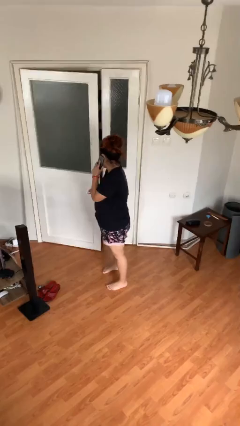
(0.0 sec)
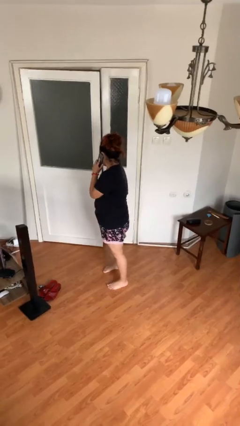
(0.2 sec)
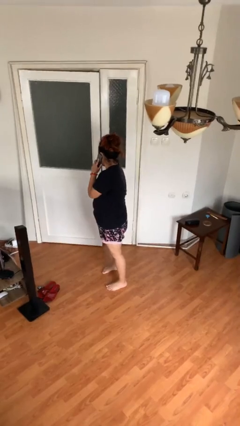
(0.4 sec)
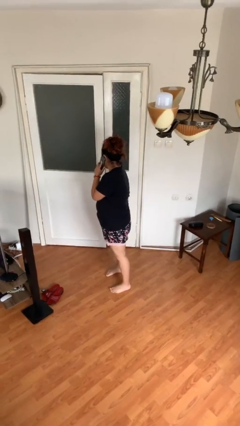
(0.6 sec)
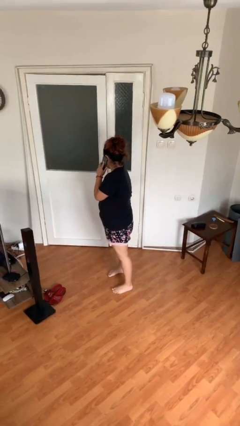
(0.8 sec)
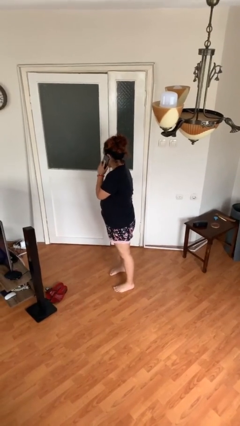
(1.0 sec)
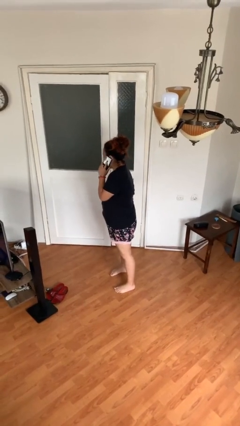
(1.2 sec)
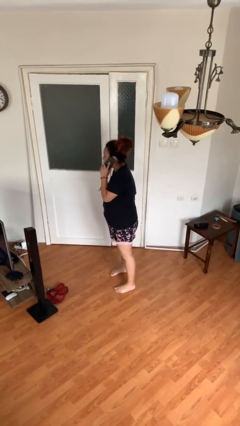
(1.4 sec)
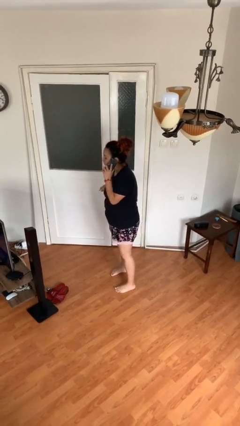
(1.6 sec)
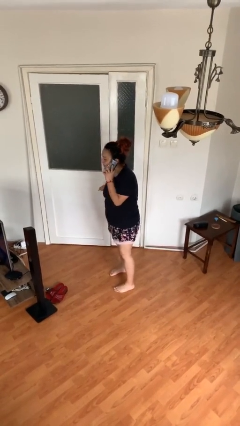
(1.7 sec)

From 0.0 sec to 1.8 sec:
person closes facility door

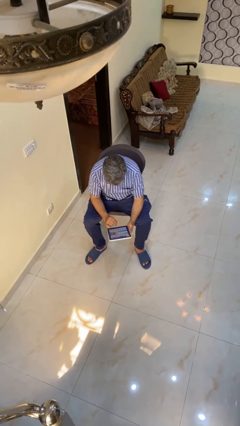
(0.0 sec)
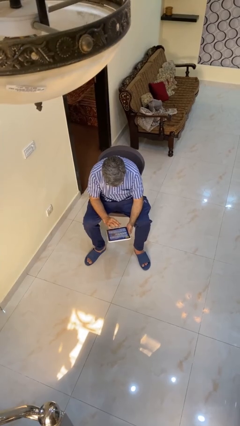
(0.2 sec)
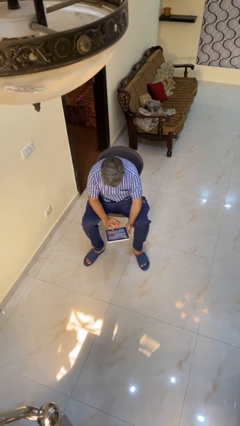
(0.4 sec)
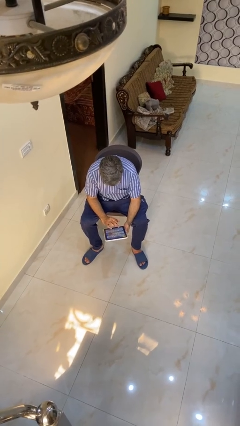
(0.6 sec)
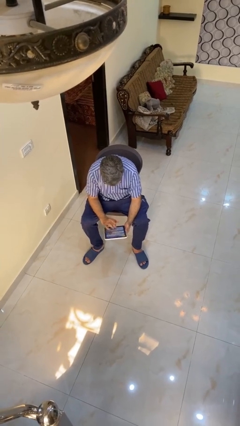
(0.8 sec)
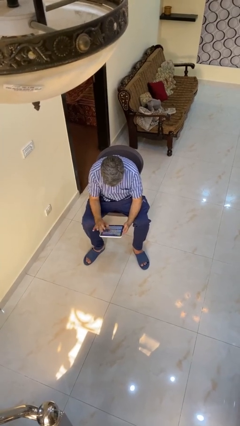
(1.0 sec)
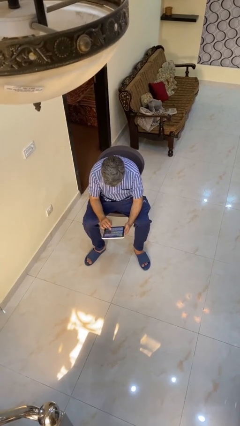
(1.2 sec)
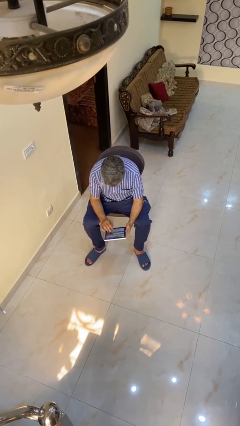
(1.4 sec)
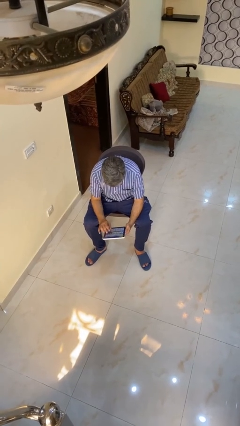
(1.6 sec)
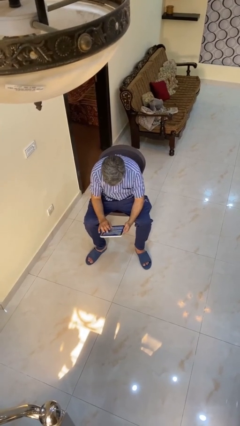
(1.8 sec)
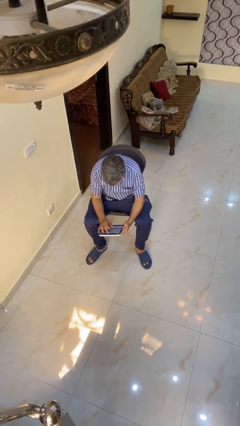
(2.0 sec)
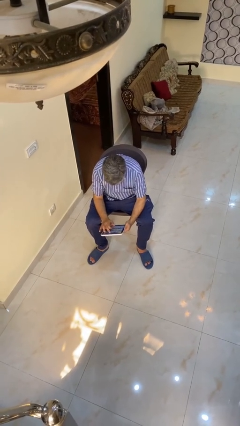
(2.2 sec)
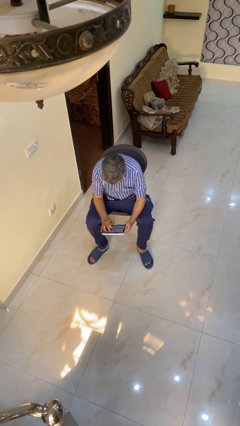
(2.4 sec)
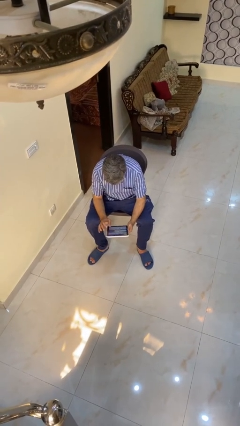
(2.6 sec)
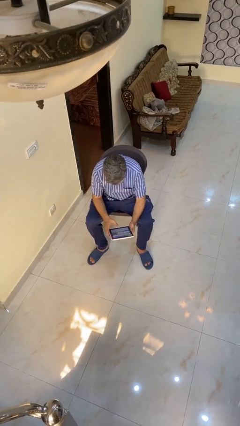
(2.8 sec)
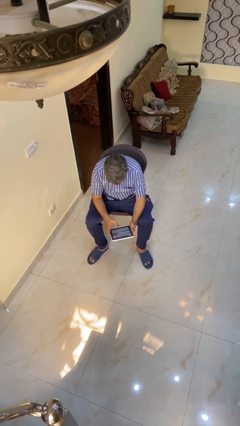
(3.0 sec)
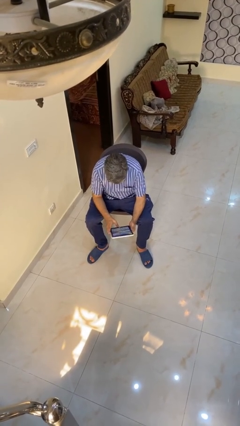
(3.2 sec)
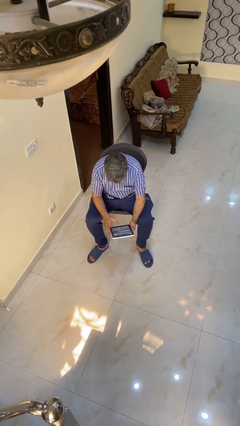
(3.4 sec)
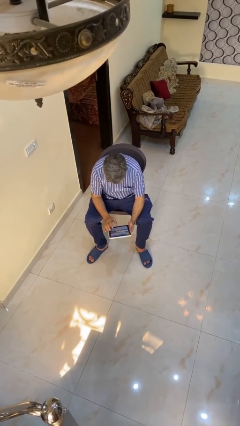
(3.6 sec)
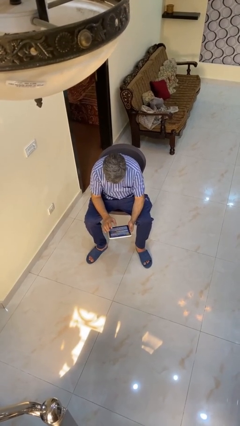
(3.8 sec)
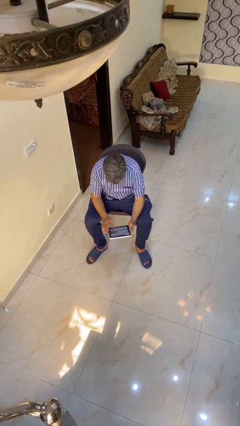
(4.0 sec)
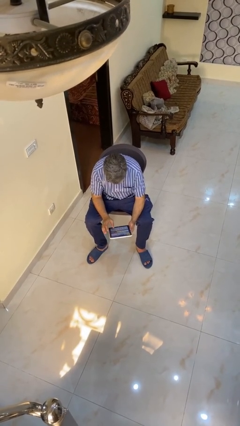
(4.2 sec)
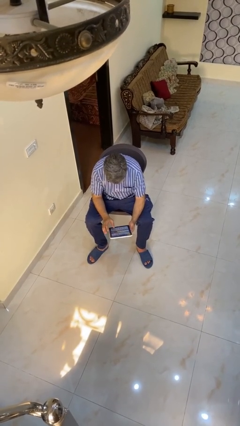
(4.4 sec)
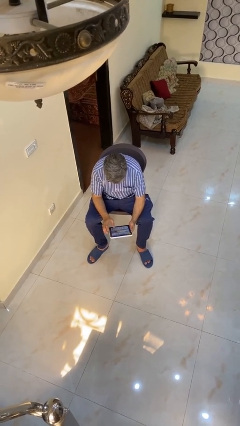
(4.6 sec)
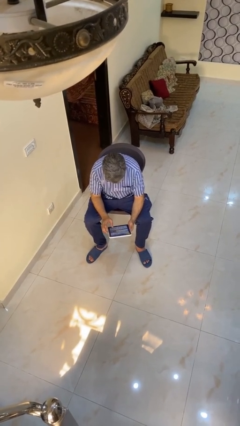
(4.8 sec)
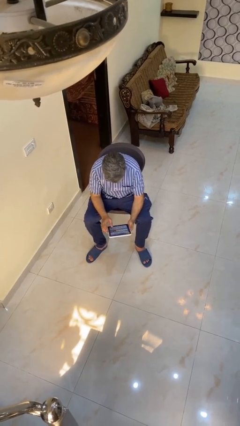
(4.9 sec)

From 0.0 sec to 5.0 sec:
person interacts with tablet

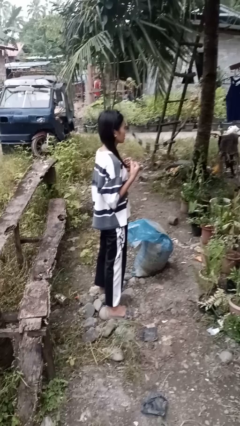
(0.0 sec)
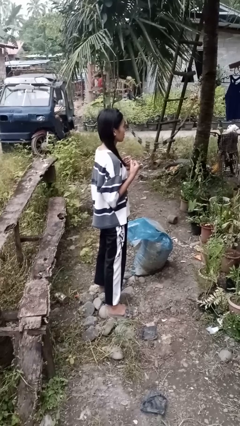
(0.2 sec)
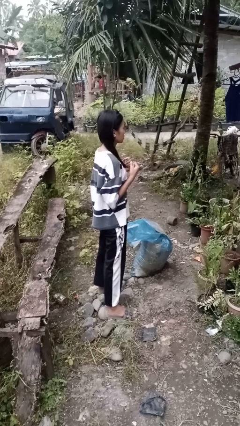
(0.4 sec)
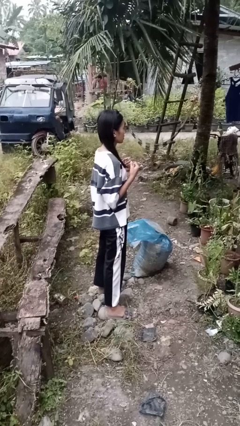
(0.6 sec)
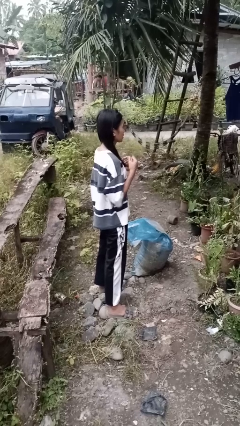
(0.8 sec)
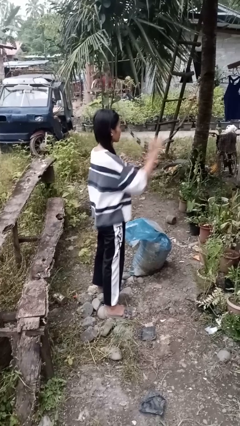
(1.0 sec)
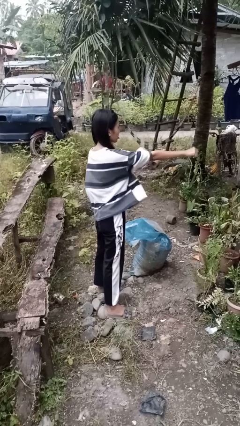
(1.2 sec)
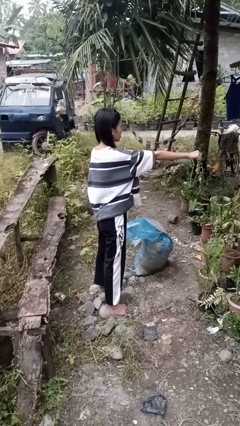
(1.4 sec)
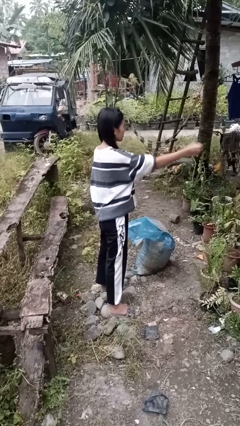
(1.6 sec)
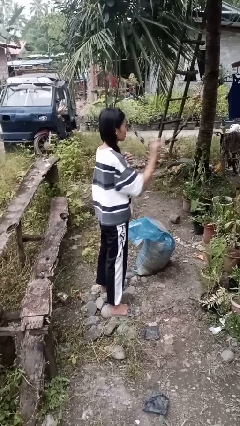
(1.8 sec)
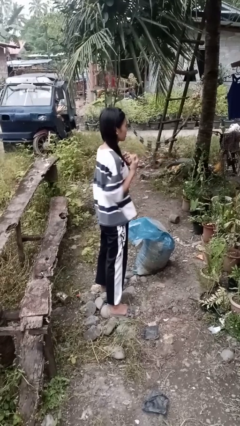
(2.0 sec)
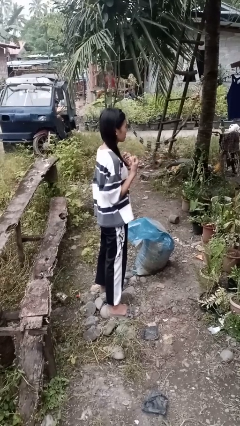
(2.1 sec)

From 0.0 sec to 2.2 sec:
person punches

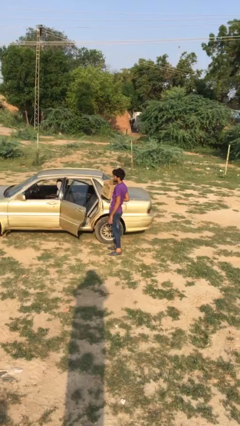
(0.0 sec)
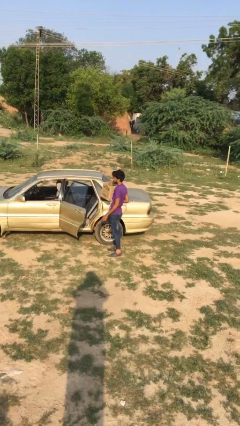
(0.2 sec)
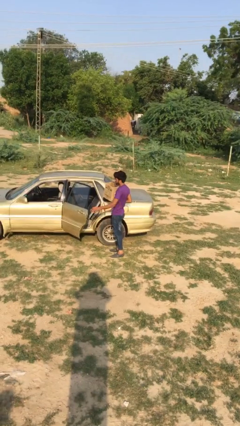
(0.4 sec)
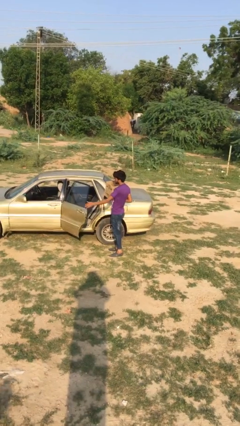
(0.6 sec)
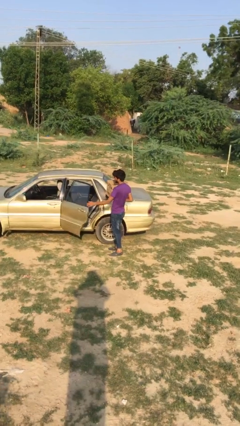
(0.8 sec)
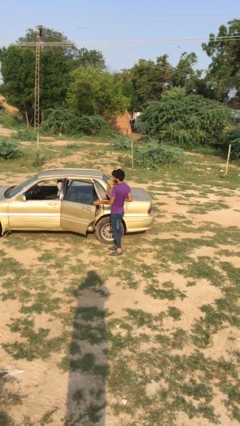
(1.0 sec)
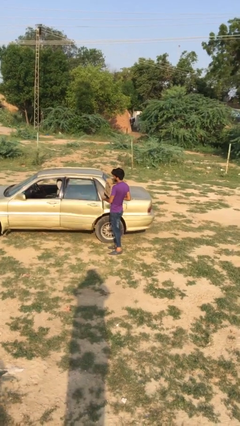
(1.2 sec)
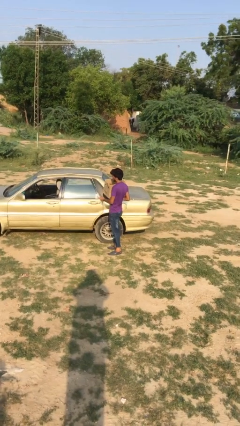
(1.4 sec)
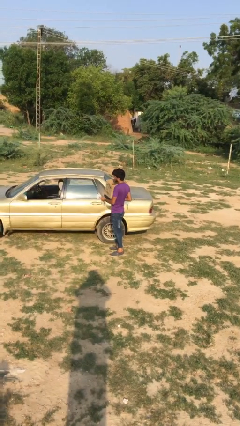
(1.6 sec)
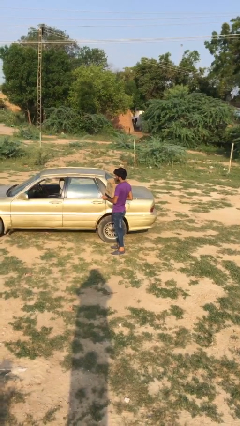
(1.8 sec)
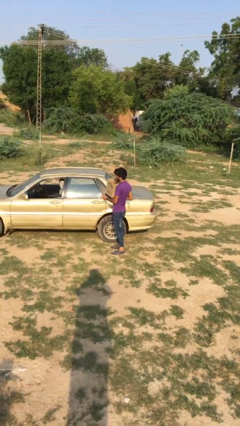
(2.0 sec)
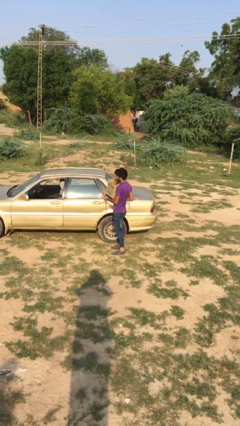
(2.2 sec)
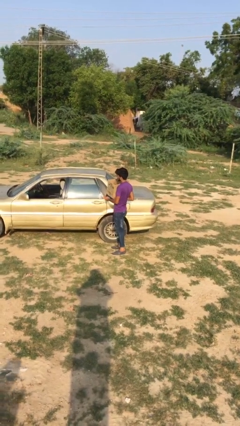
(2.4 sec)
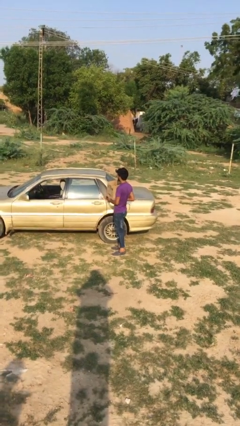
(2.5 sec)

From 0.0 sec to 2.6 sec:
person closes car door

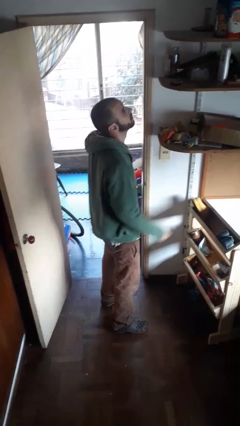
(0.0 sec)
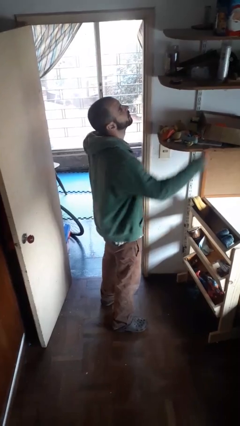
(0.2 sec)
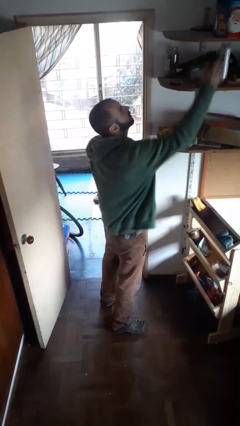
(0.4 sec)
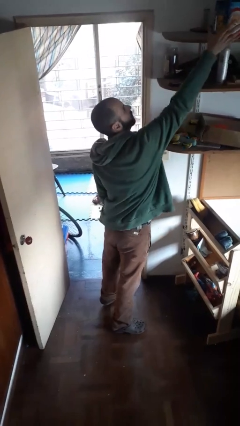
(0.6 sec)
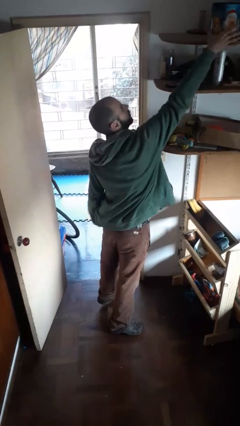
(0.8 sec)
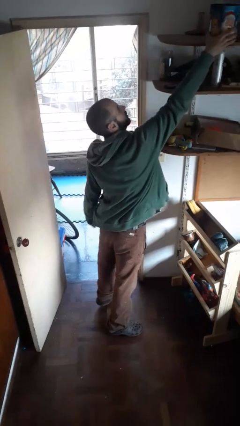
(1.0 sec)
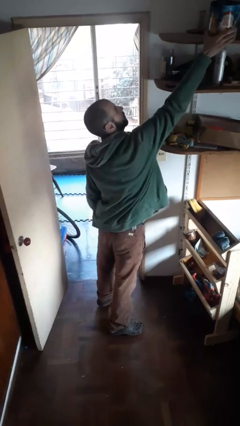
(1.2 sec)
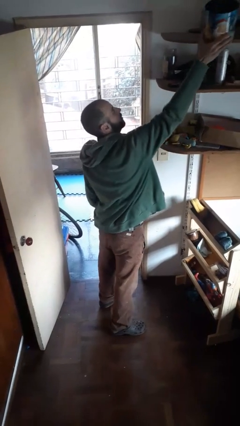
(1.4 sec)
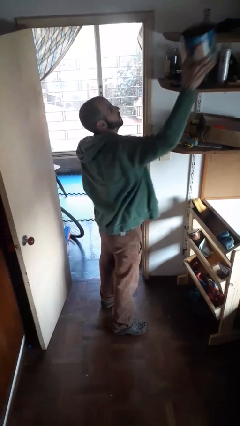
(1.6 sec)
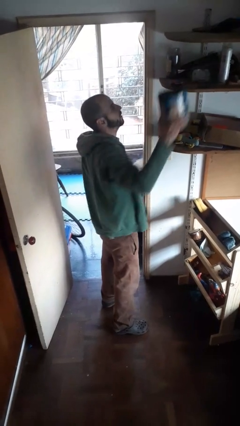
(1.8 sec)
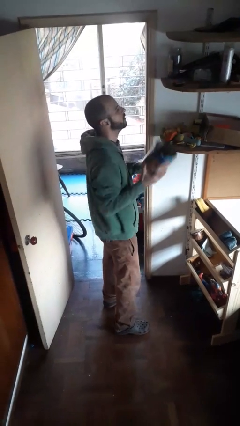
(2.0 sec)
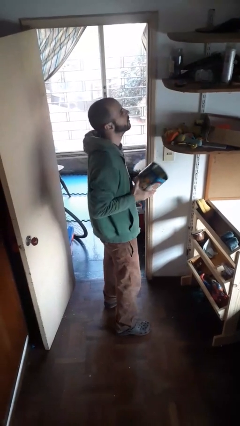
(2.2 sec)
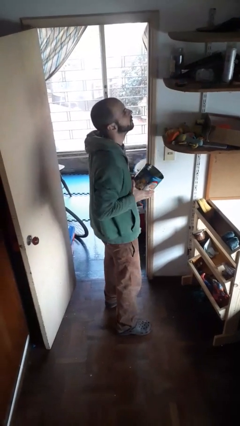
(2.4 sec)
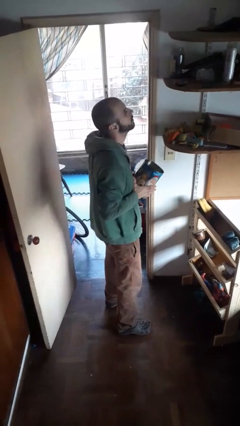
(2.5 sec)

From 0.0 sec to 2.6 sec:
person picks up object from shelf

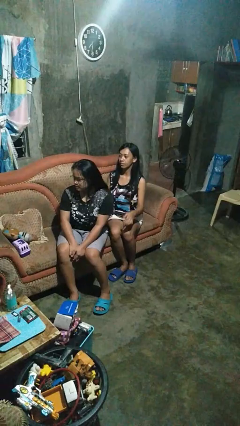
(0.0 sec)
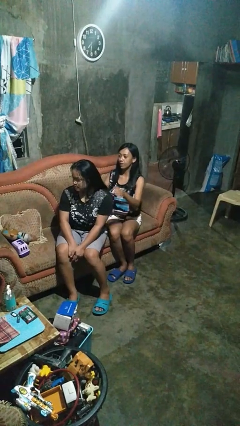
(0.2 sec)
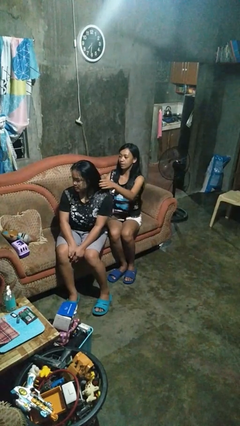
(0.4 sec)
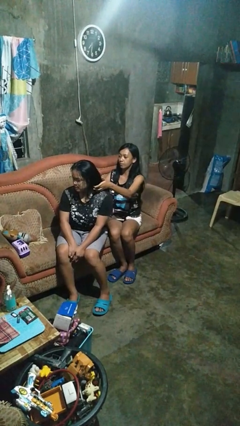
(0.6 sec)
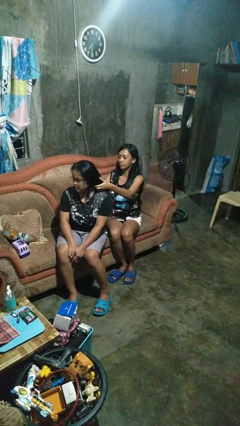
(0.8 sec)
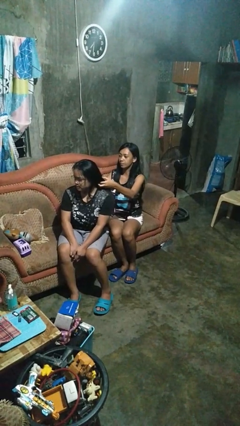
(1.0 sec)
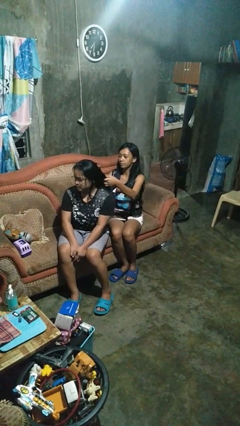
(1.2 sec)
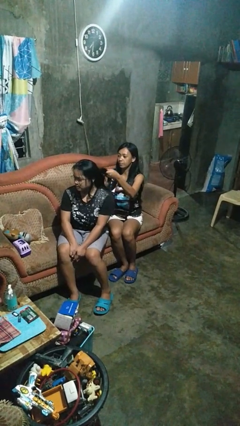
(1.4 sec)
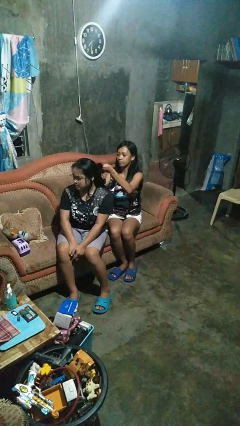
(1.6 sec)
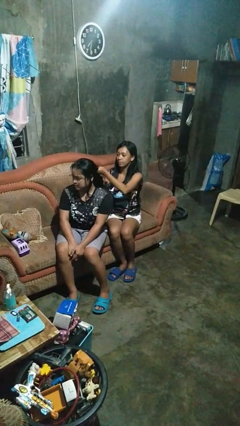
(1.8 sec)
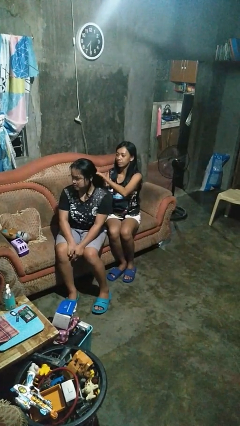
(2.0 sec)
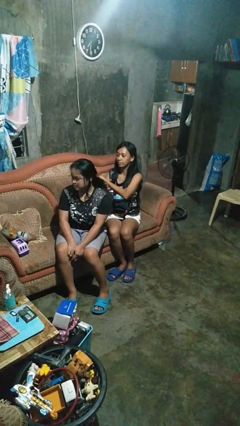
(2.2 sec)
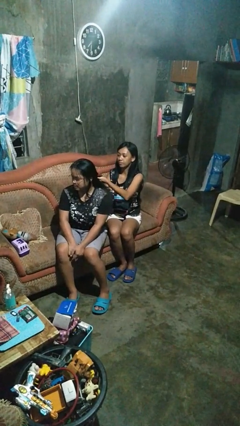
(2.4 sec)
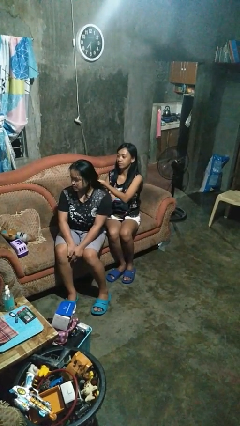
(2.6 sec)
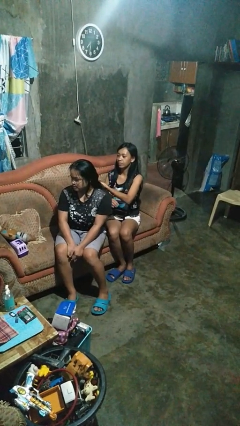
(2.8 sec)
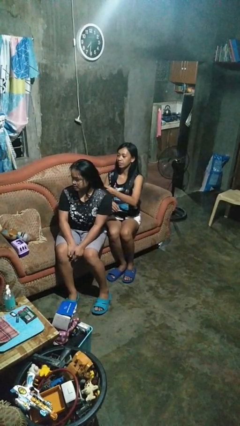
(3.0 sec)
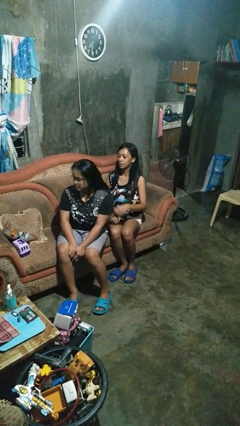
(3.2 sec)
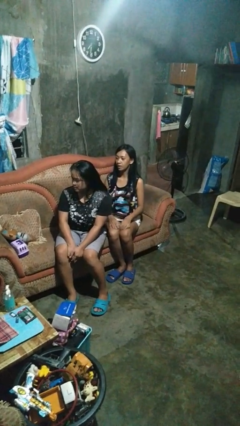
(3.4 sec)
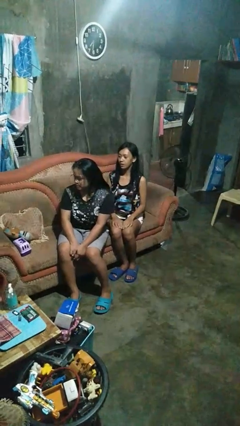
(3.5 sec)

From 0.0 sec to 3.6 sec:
person braids hair of person
